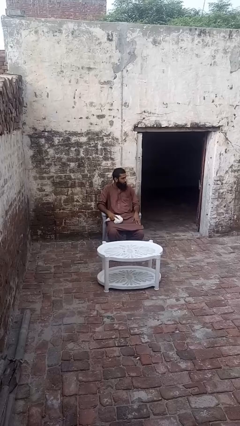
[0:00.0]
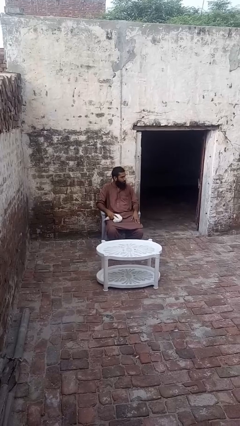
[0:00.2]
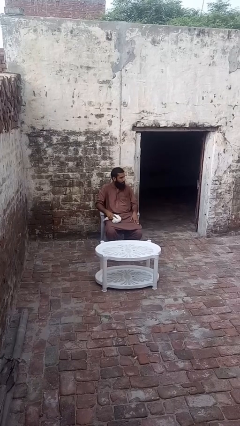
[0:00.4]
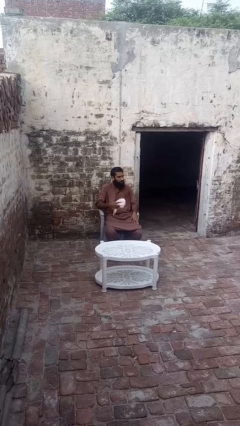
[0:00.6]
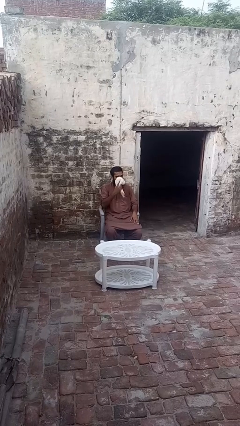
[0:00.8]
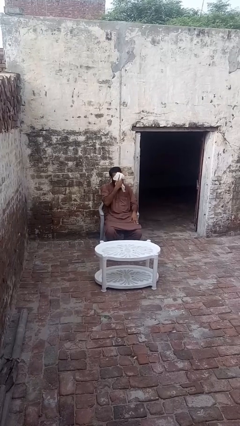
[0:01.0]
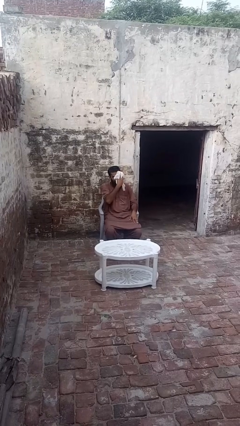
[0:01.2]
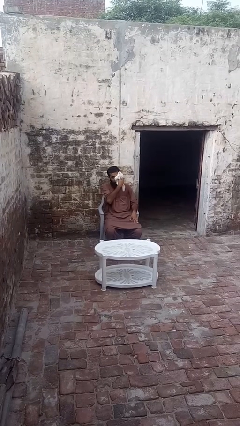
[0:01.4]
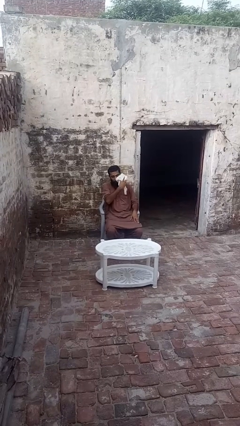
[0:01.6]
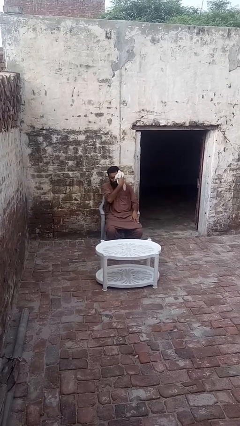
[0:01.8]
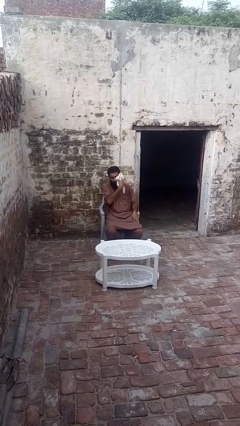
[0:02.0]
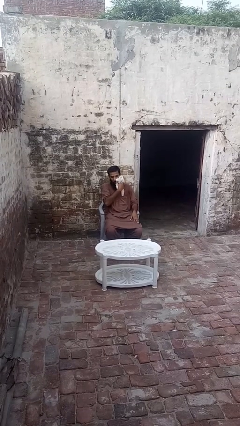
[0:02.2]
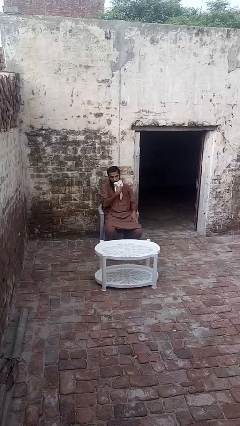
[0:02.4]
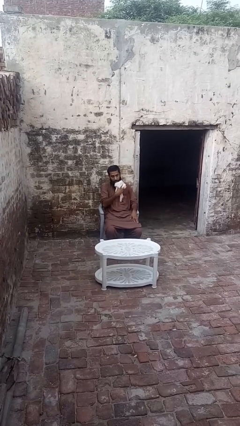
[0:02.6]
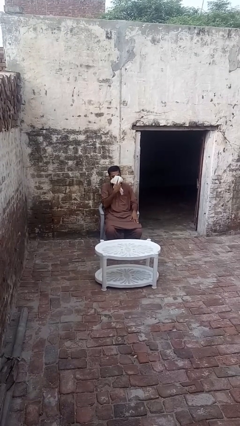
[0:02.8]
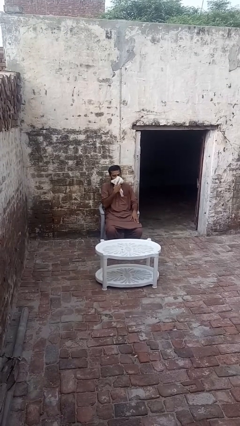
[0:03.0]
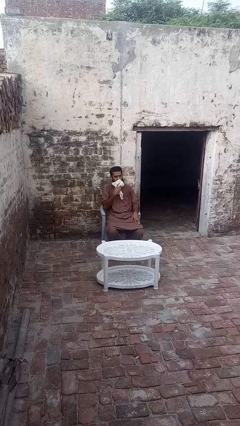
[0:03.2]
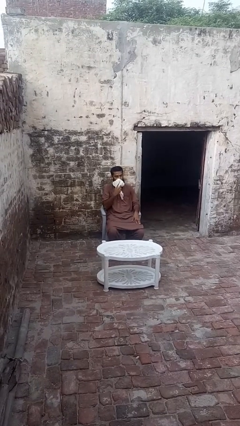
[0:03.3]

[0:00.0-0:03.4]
person wipes mouth with napkin

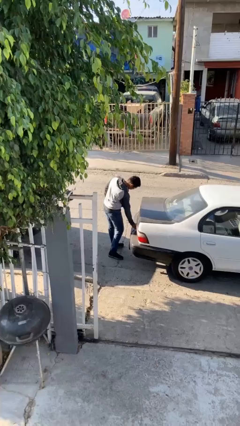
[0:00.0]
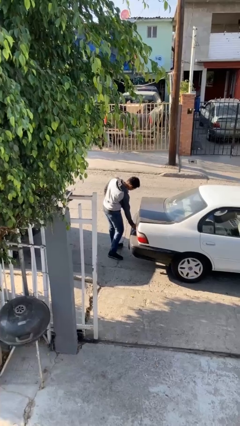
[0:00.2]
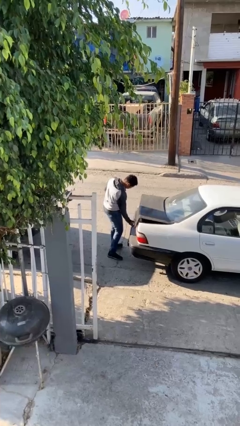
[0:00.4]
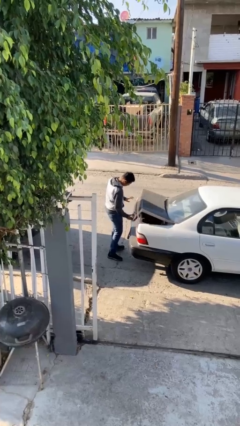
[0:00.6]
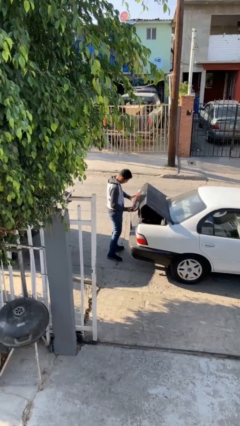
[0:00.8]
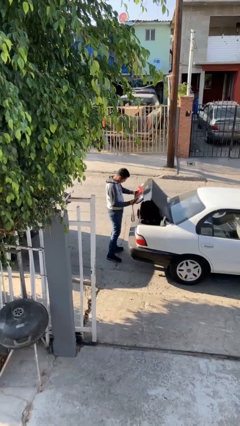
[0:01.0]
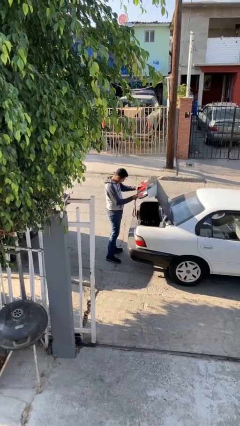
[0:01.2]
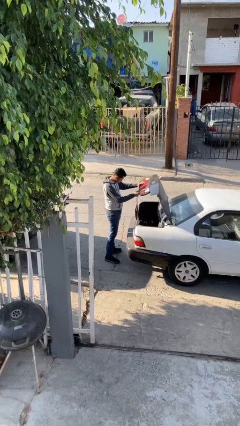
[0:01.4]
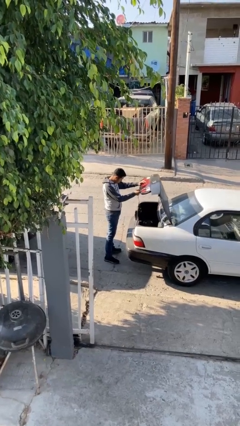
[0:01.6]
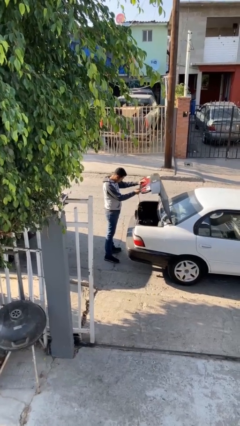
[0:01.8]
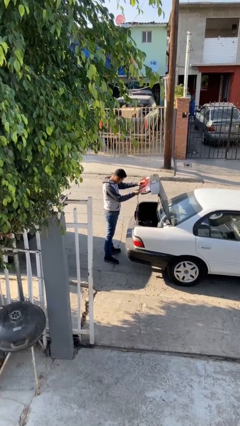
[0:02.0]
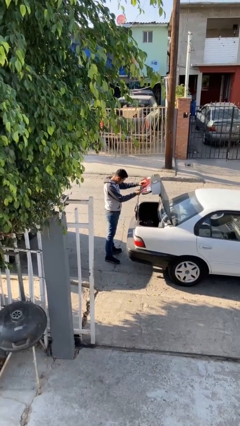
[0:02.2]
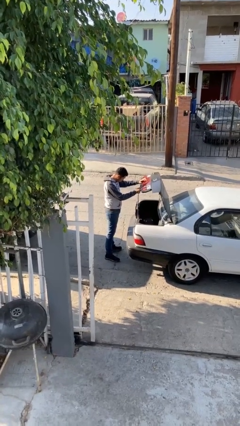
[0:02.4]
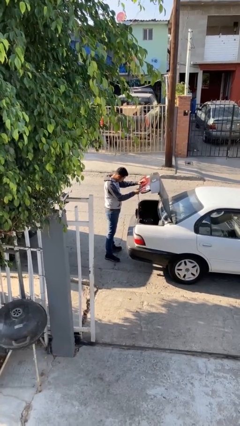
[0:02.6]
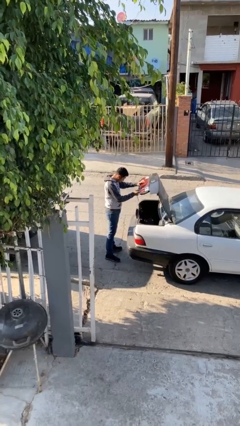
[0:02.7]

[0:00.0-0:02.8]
person opens car trunk

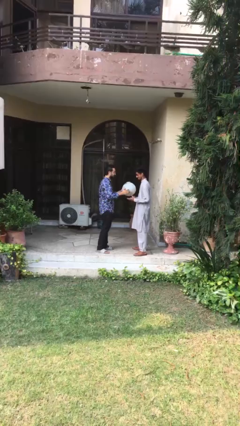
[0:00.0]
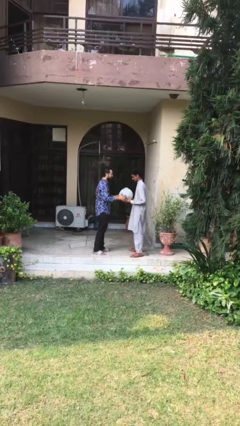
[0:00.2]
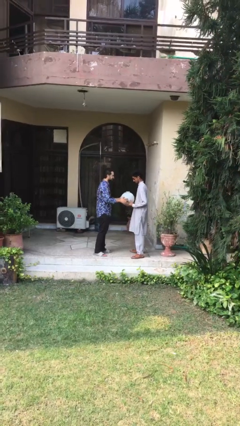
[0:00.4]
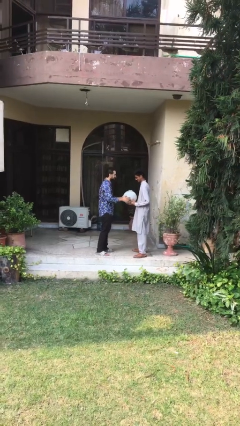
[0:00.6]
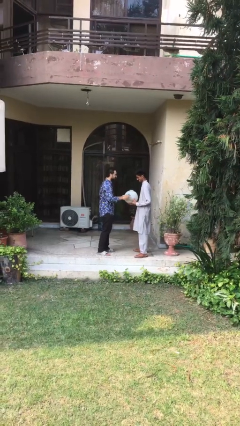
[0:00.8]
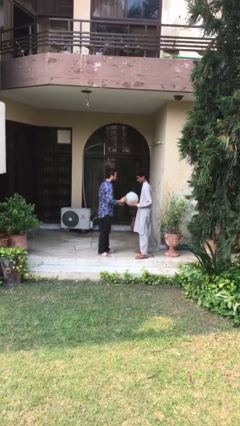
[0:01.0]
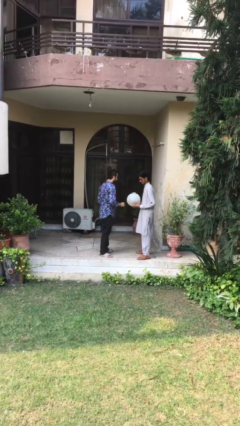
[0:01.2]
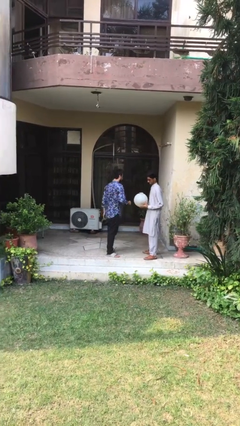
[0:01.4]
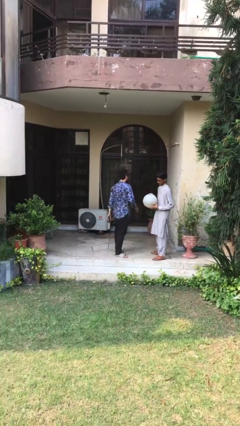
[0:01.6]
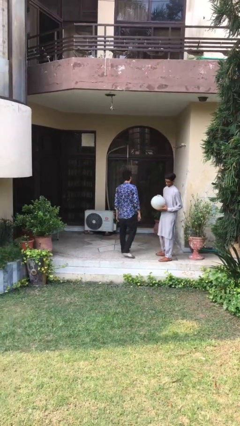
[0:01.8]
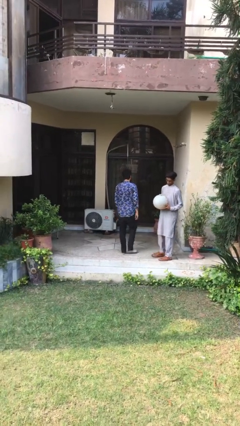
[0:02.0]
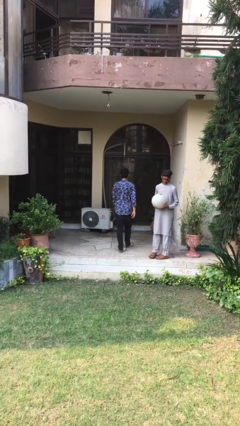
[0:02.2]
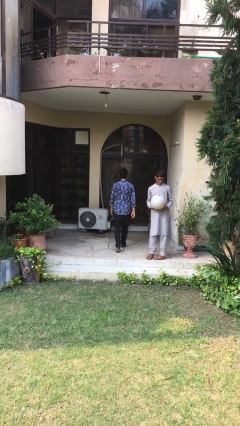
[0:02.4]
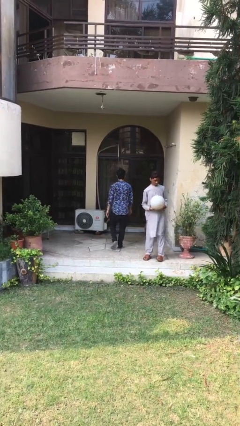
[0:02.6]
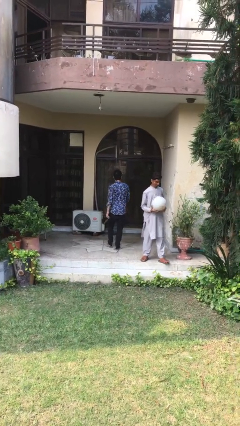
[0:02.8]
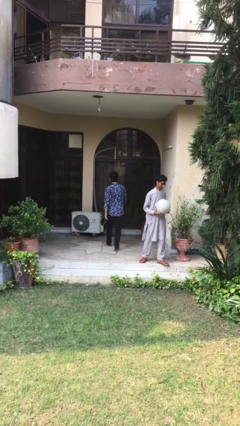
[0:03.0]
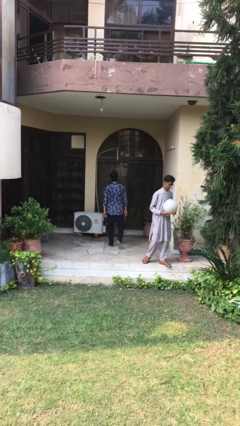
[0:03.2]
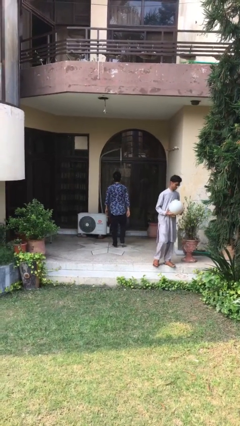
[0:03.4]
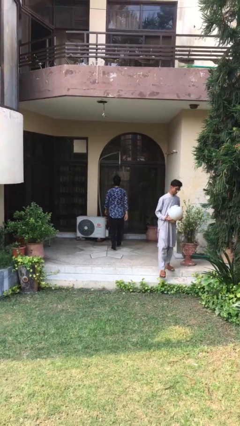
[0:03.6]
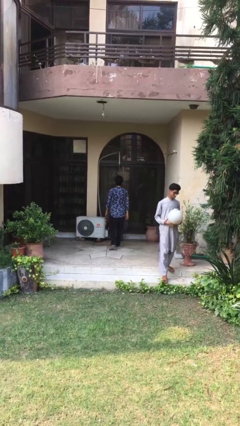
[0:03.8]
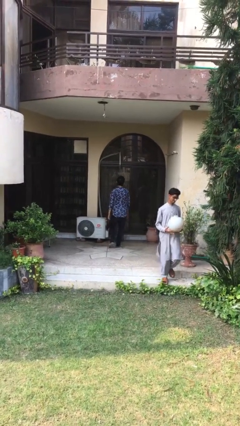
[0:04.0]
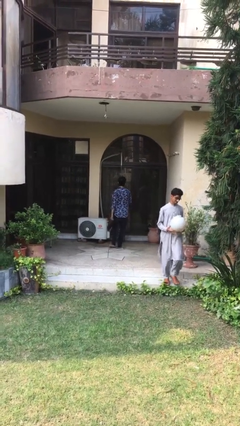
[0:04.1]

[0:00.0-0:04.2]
person transfers object to person

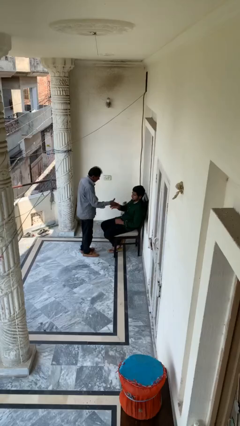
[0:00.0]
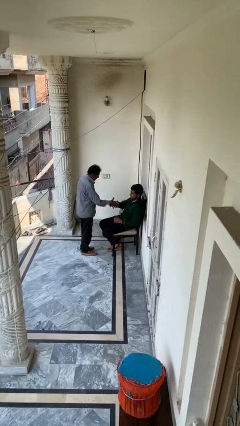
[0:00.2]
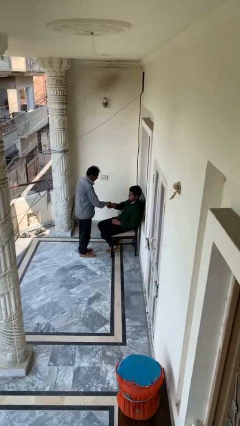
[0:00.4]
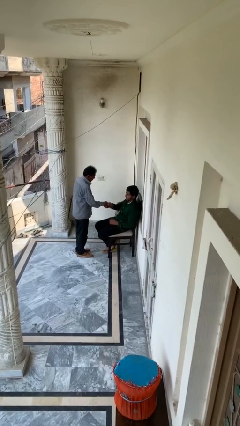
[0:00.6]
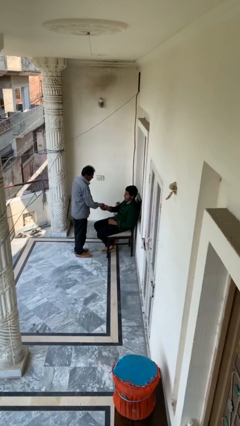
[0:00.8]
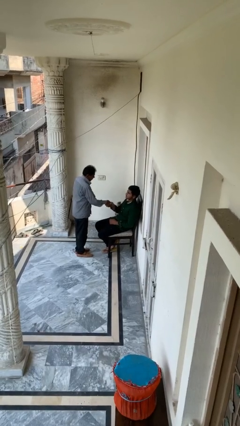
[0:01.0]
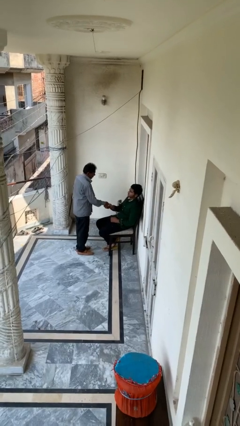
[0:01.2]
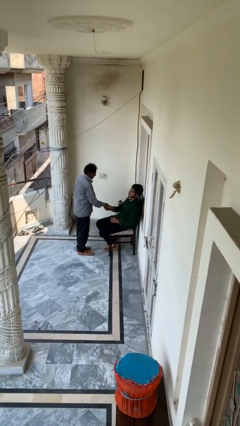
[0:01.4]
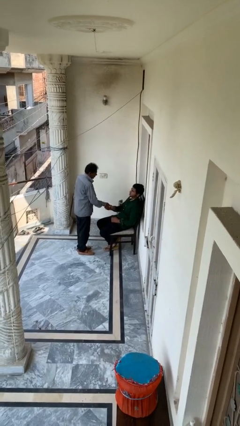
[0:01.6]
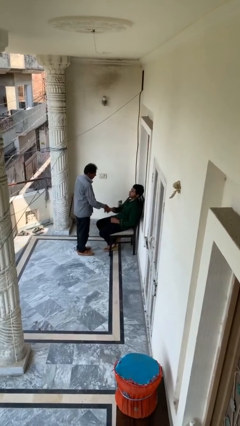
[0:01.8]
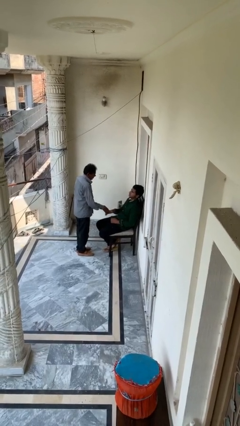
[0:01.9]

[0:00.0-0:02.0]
person shakes hand

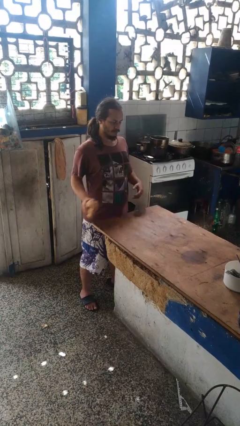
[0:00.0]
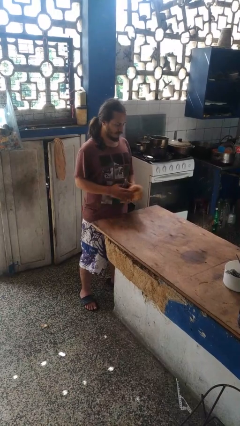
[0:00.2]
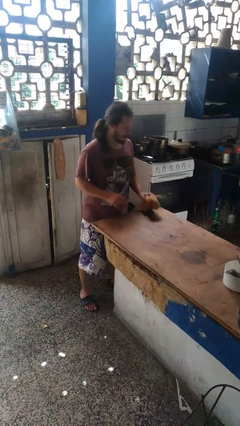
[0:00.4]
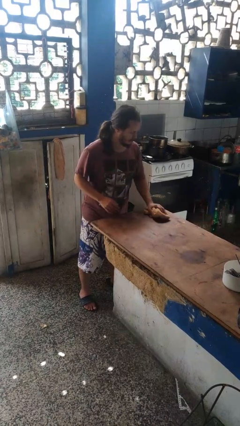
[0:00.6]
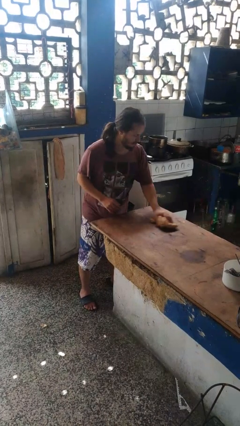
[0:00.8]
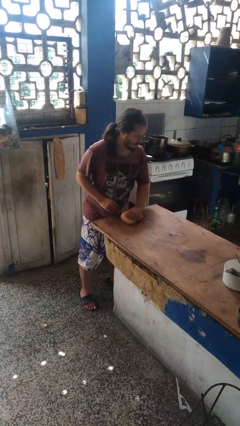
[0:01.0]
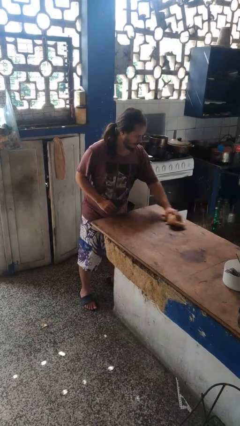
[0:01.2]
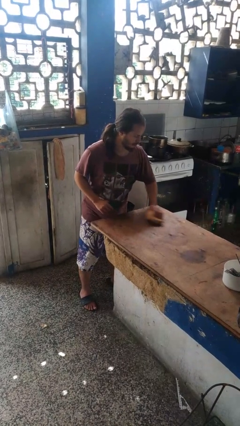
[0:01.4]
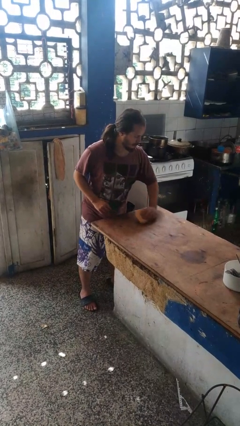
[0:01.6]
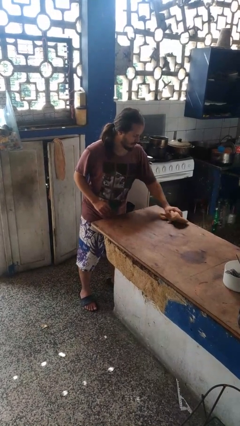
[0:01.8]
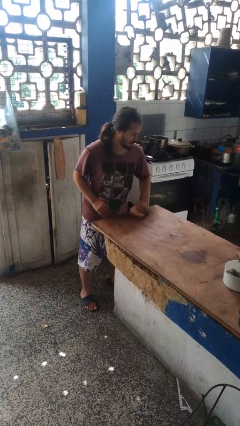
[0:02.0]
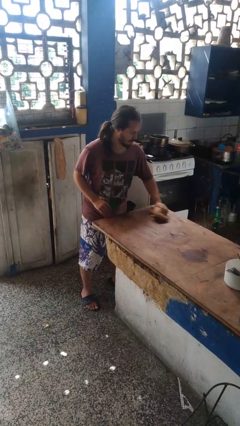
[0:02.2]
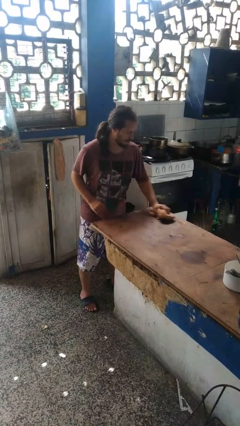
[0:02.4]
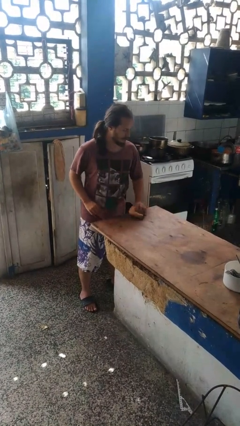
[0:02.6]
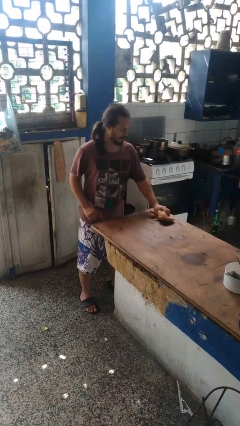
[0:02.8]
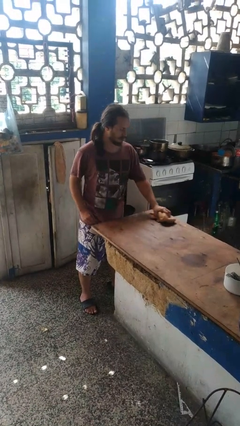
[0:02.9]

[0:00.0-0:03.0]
person cleans table with rag

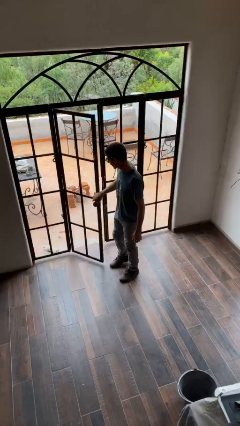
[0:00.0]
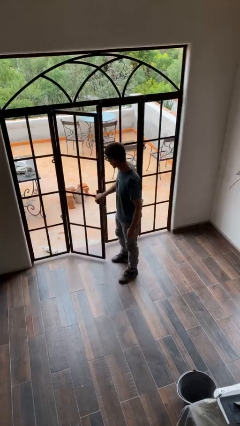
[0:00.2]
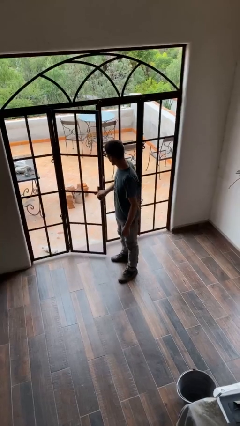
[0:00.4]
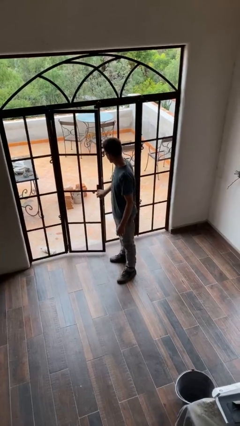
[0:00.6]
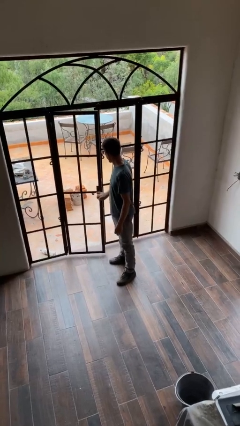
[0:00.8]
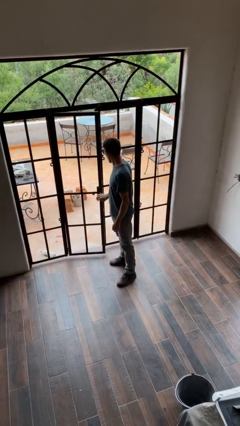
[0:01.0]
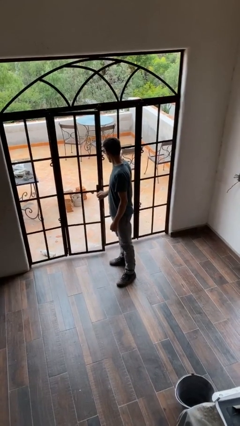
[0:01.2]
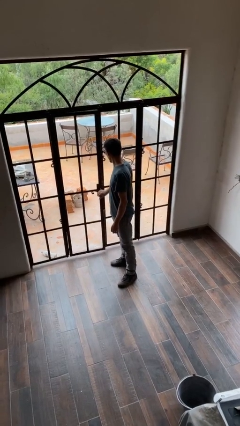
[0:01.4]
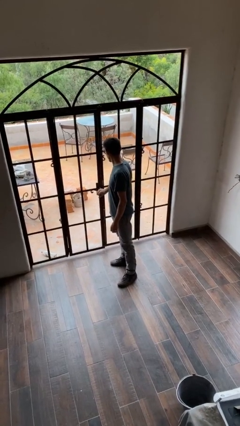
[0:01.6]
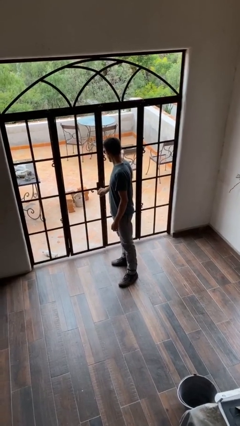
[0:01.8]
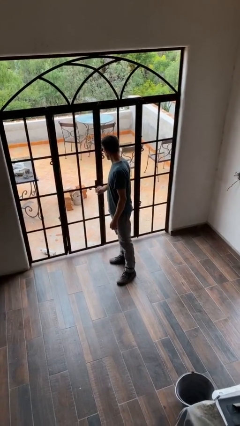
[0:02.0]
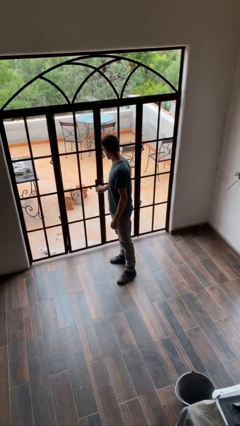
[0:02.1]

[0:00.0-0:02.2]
person closes facility door
